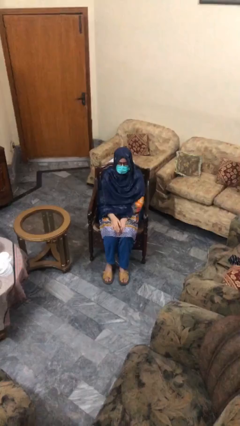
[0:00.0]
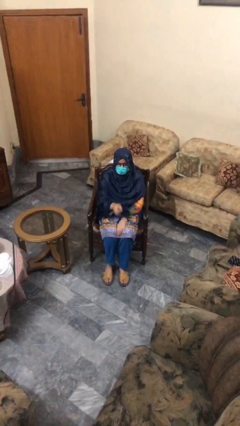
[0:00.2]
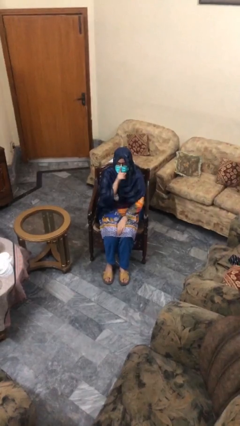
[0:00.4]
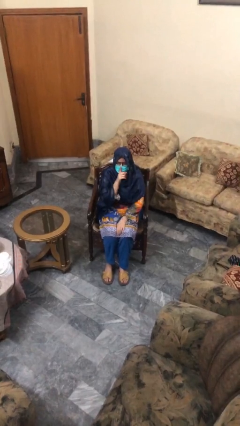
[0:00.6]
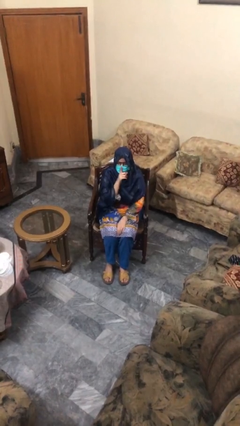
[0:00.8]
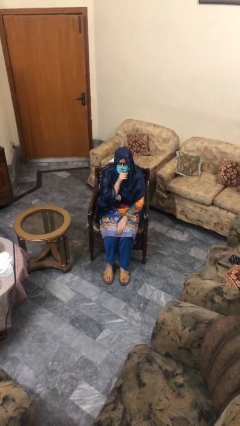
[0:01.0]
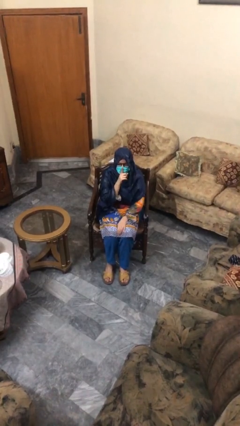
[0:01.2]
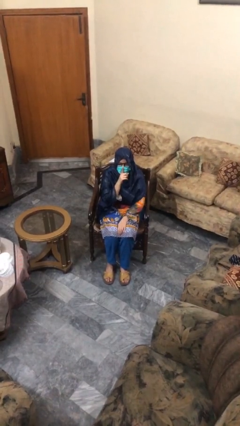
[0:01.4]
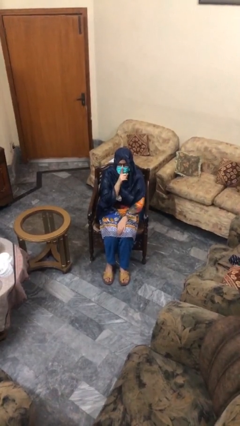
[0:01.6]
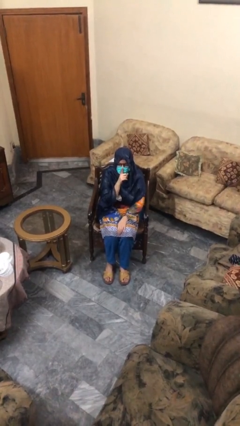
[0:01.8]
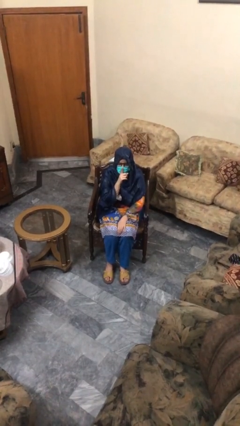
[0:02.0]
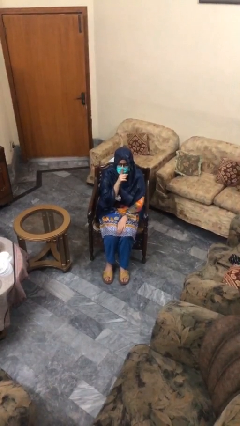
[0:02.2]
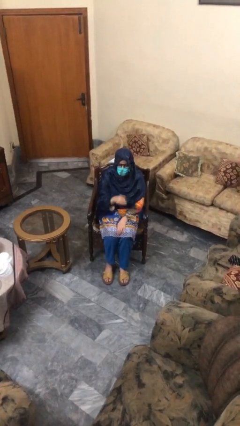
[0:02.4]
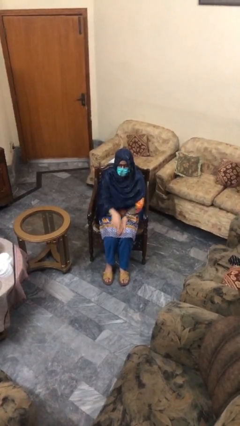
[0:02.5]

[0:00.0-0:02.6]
person gestures be quiet

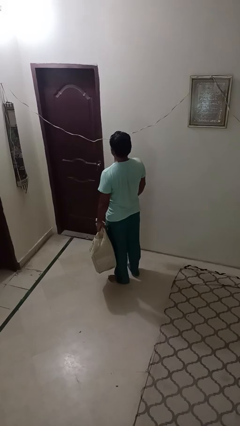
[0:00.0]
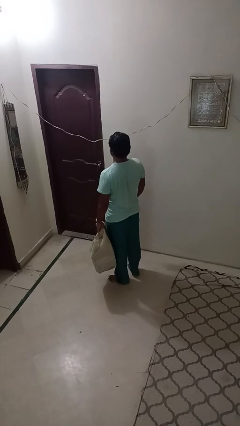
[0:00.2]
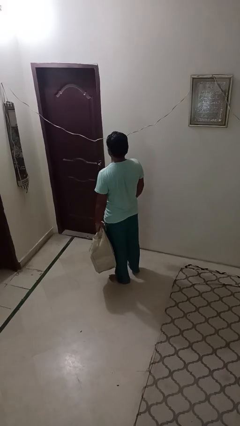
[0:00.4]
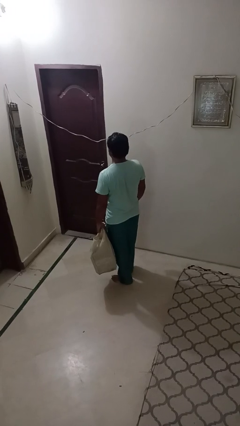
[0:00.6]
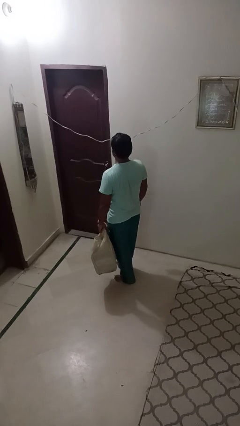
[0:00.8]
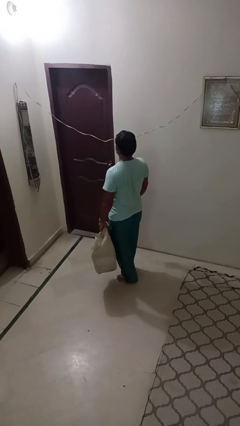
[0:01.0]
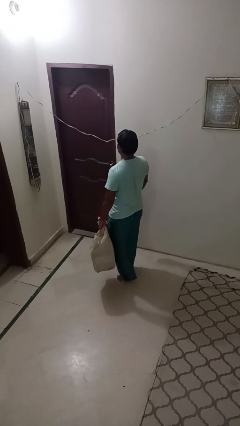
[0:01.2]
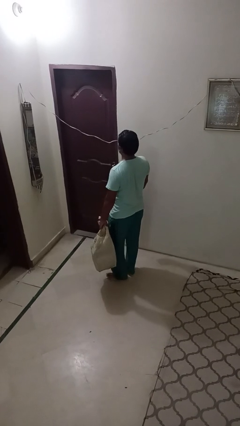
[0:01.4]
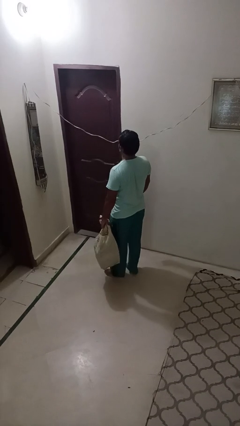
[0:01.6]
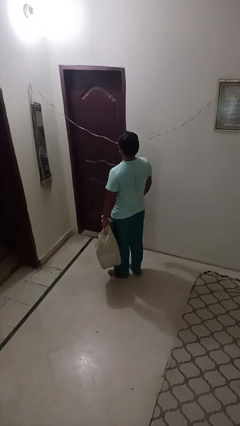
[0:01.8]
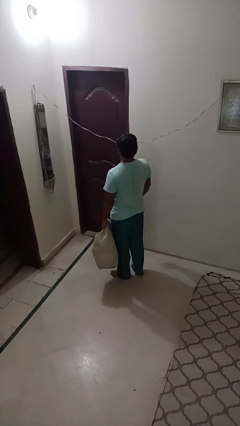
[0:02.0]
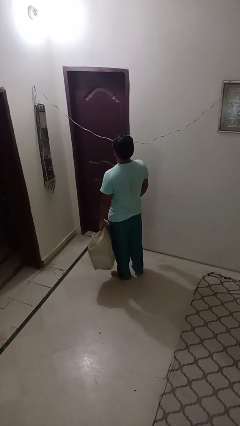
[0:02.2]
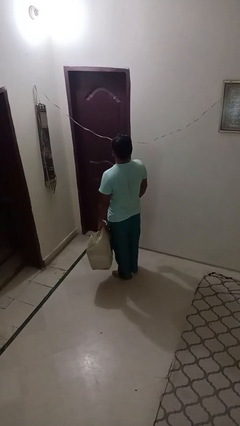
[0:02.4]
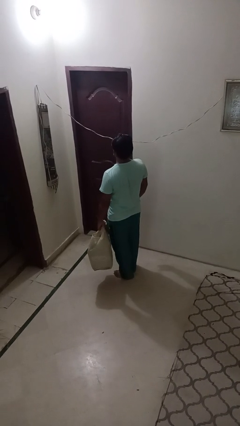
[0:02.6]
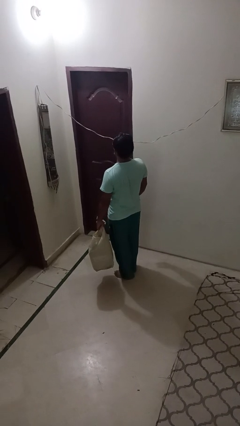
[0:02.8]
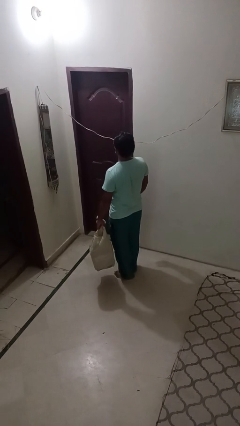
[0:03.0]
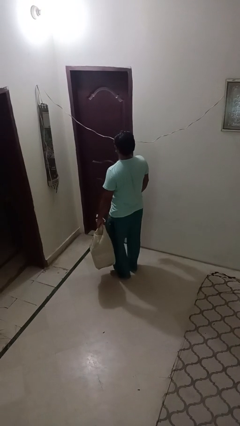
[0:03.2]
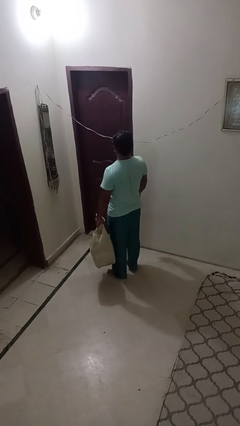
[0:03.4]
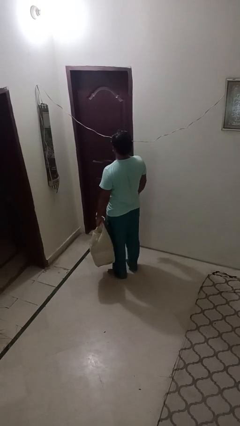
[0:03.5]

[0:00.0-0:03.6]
person carries groceries

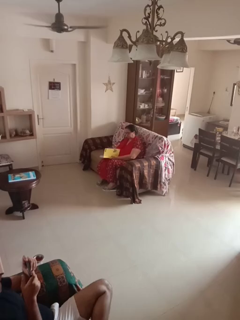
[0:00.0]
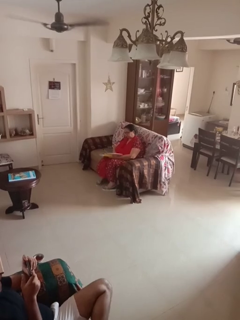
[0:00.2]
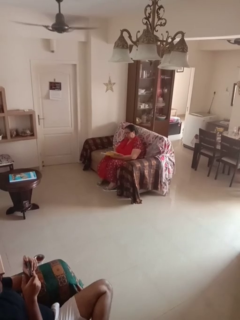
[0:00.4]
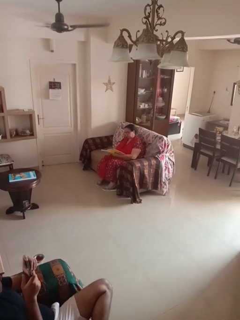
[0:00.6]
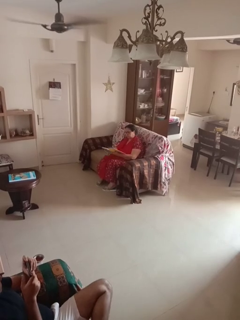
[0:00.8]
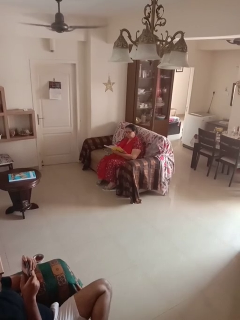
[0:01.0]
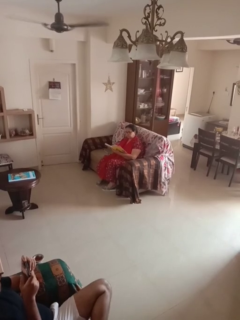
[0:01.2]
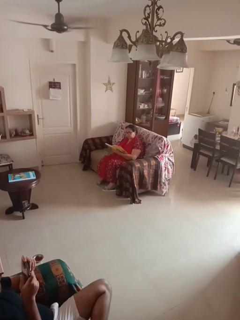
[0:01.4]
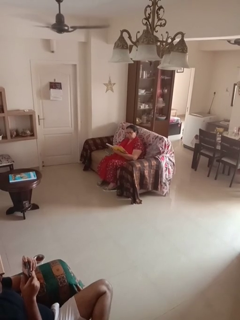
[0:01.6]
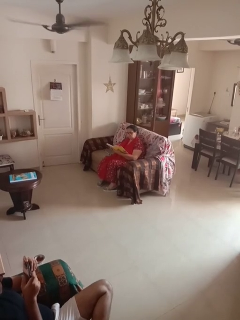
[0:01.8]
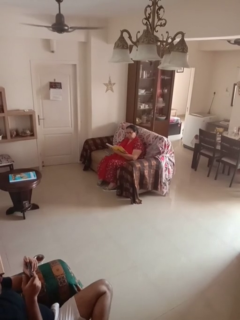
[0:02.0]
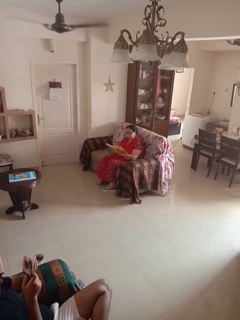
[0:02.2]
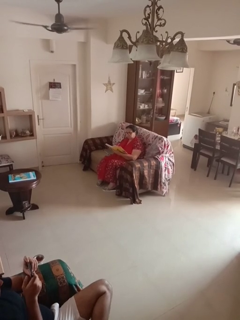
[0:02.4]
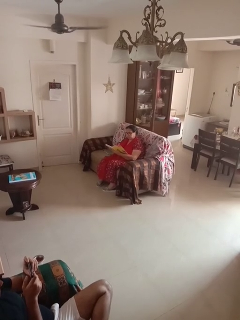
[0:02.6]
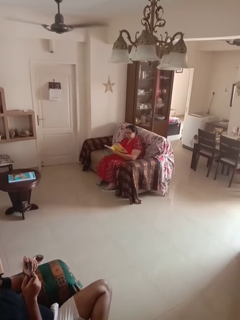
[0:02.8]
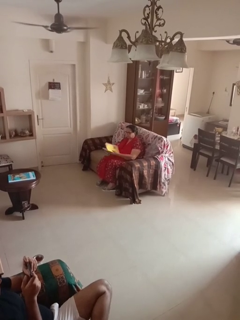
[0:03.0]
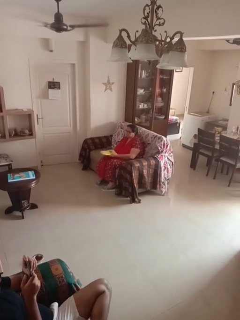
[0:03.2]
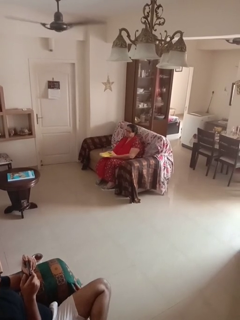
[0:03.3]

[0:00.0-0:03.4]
person reads document

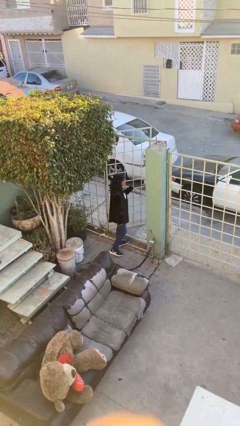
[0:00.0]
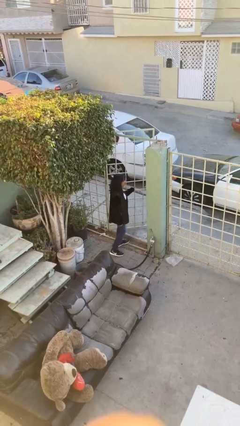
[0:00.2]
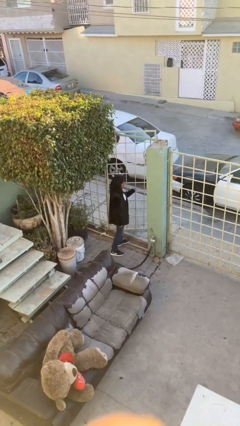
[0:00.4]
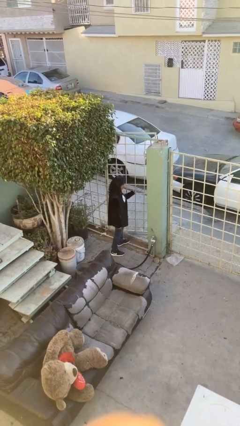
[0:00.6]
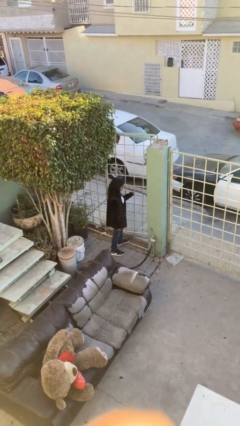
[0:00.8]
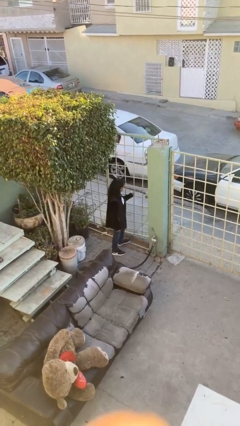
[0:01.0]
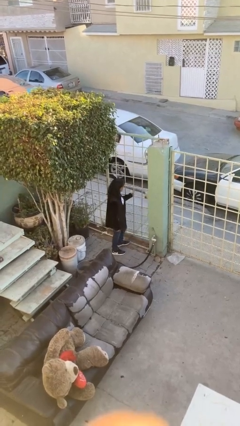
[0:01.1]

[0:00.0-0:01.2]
person closes facility door

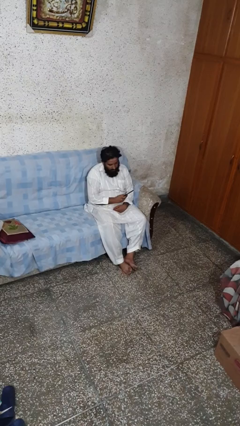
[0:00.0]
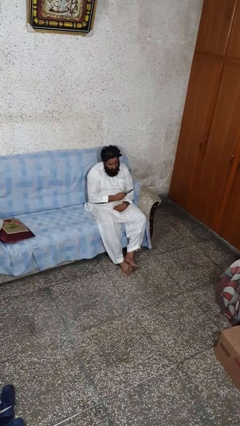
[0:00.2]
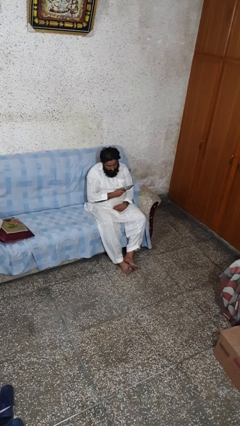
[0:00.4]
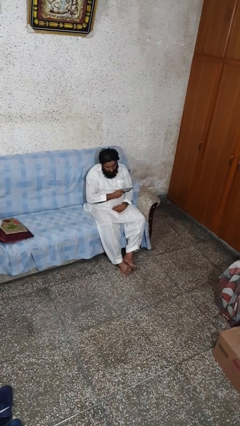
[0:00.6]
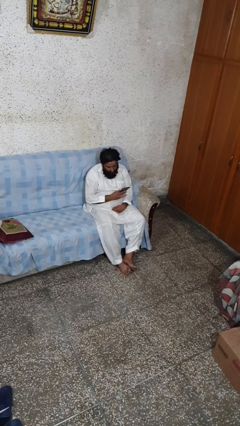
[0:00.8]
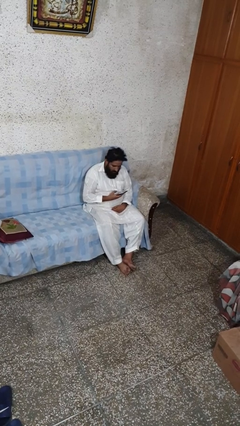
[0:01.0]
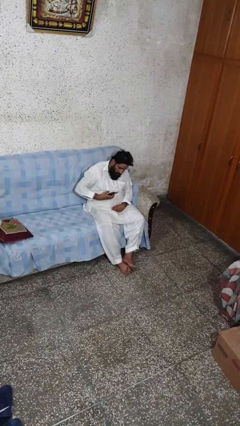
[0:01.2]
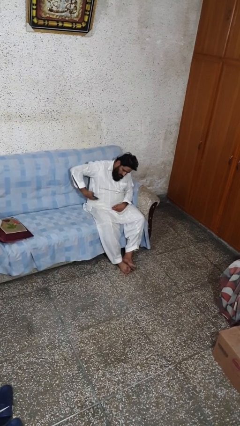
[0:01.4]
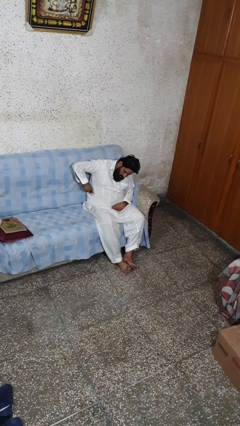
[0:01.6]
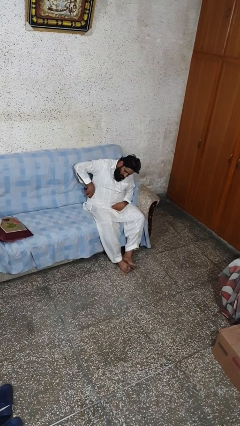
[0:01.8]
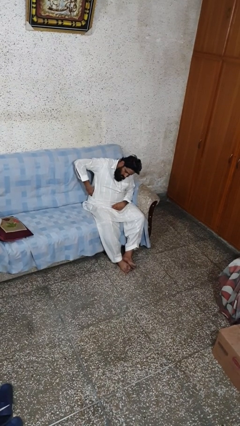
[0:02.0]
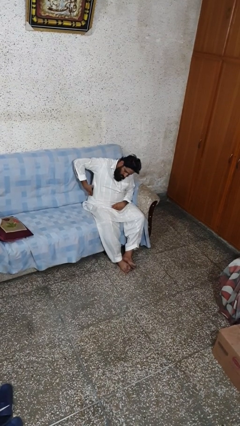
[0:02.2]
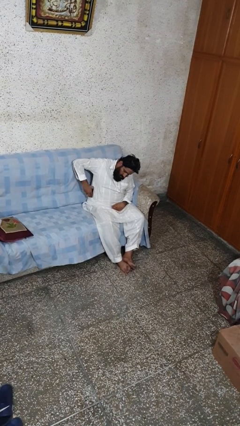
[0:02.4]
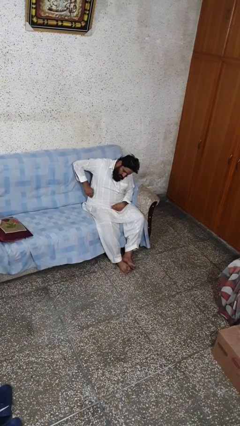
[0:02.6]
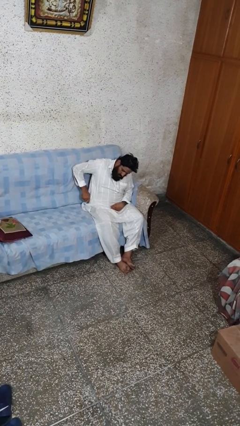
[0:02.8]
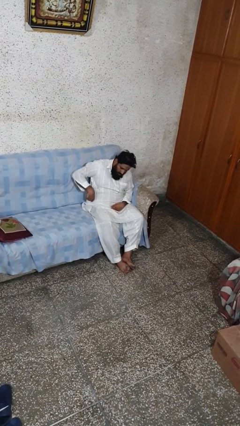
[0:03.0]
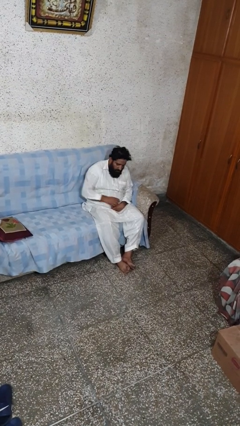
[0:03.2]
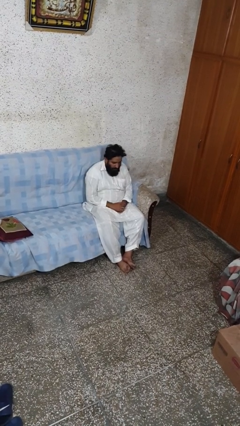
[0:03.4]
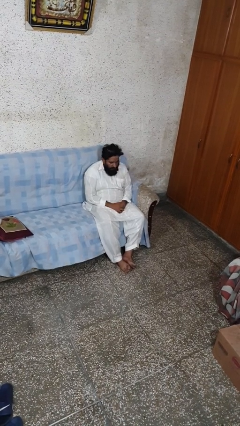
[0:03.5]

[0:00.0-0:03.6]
person puts phone into pocket

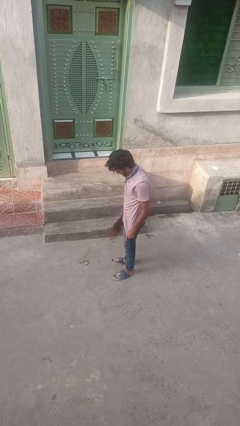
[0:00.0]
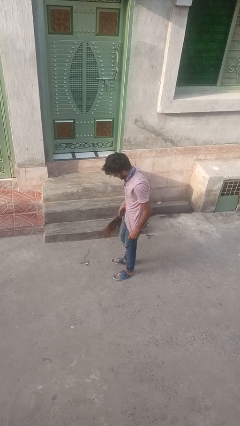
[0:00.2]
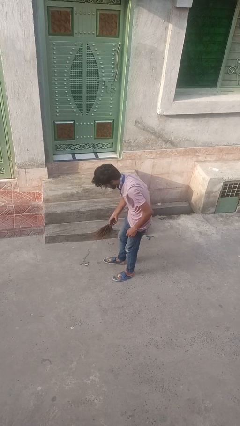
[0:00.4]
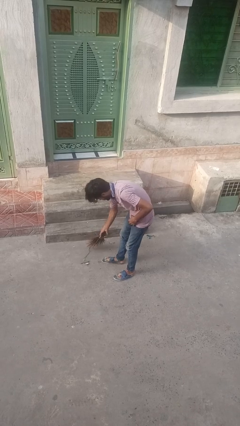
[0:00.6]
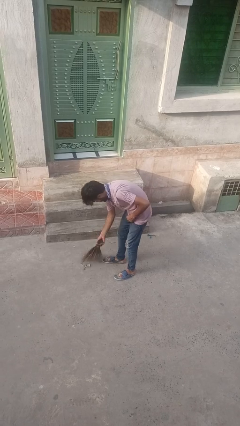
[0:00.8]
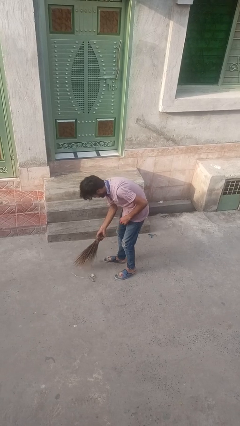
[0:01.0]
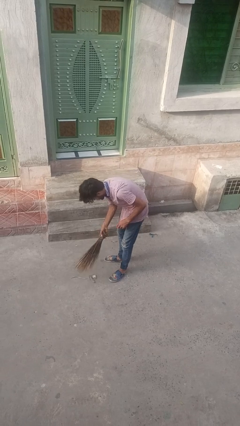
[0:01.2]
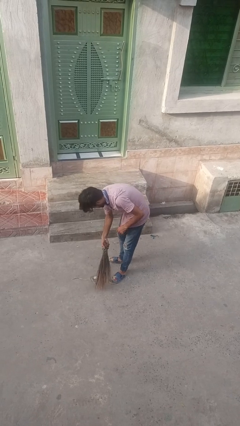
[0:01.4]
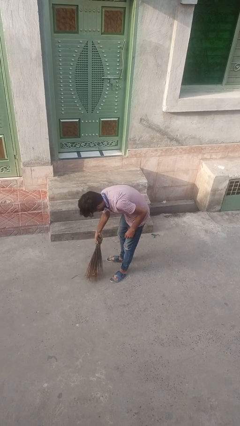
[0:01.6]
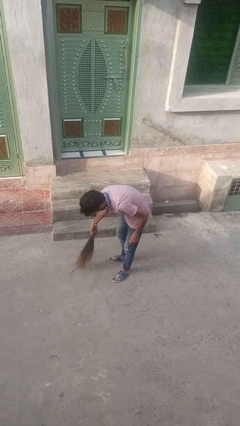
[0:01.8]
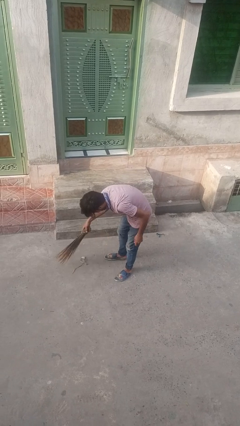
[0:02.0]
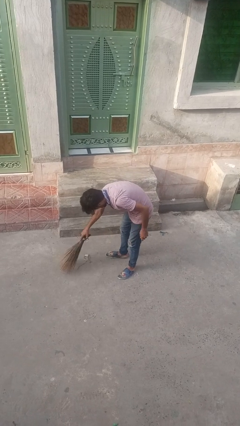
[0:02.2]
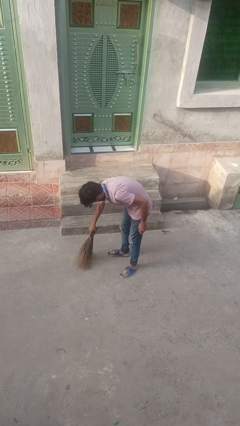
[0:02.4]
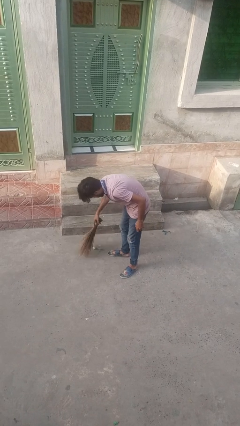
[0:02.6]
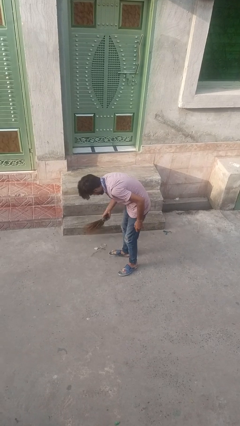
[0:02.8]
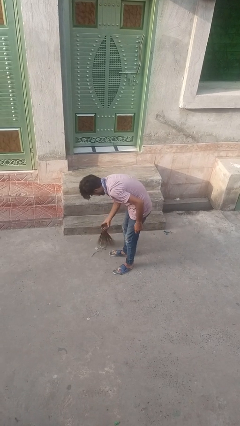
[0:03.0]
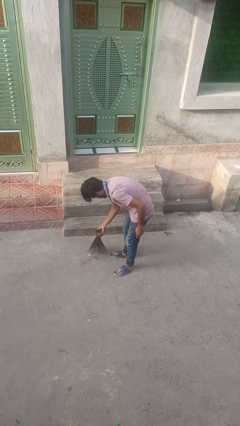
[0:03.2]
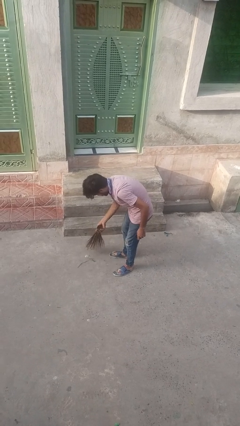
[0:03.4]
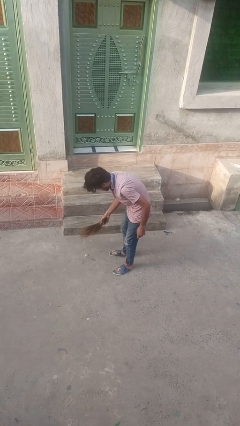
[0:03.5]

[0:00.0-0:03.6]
person sweeps floor

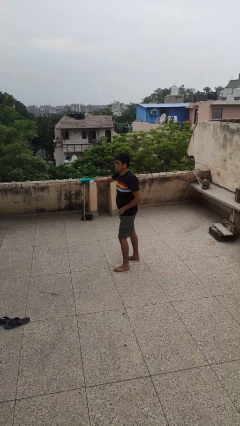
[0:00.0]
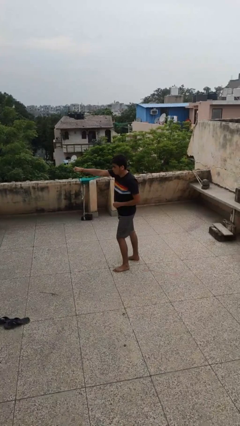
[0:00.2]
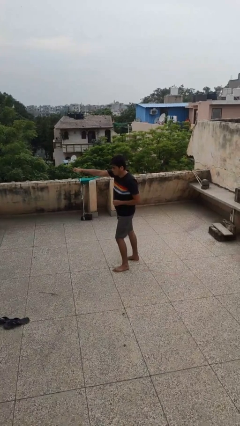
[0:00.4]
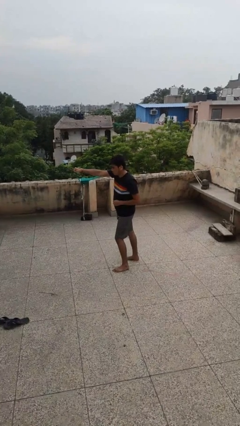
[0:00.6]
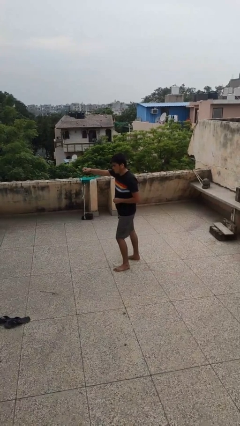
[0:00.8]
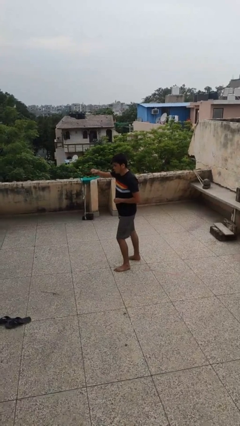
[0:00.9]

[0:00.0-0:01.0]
person punches
